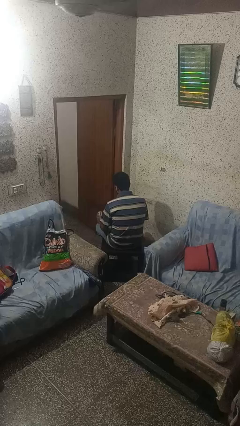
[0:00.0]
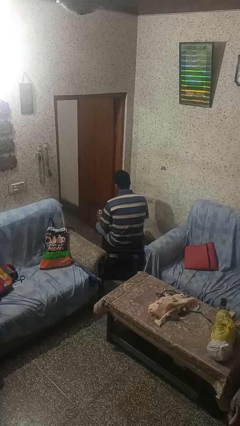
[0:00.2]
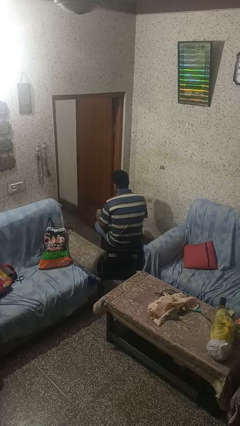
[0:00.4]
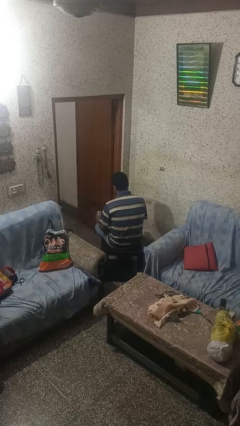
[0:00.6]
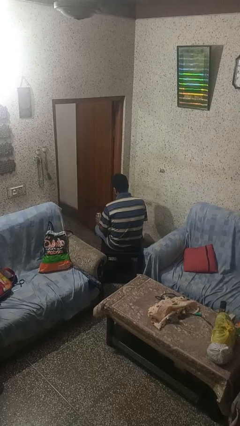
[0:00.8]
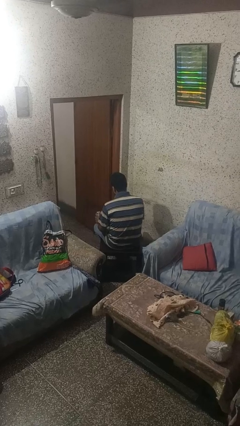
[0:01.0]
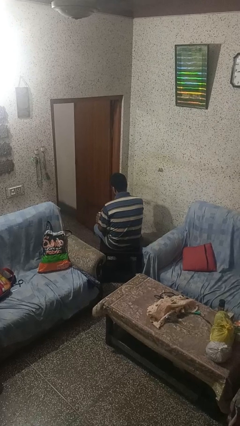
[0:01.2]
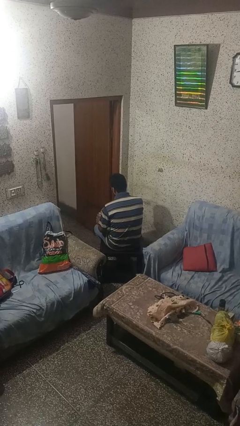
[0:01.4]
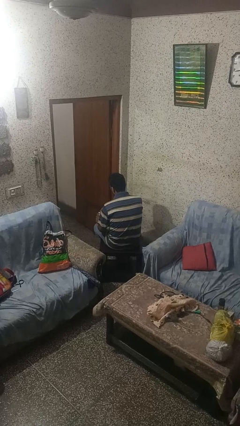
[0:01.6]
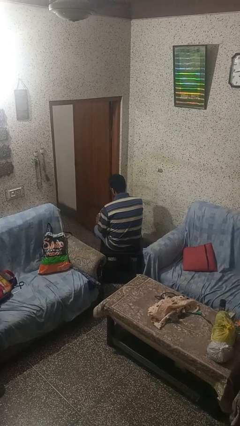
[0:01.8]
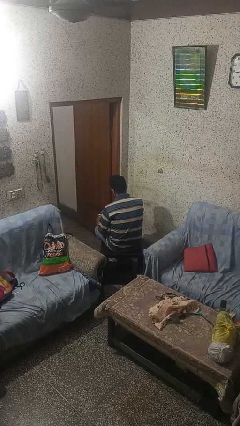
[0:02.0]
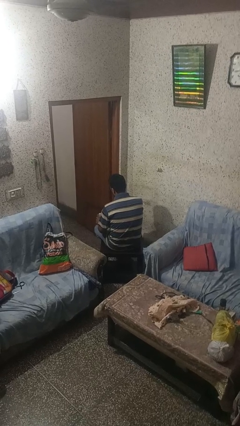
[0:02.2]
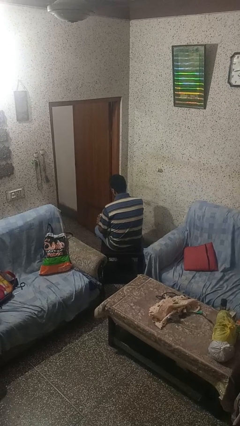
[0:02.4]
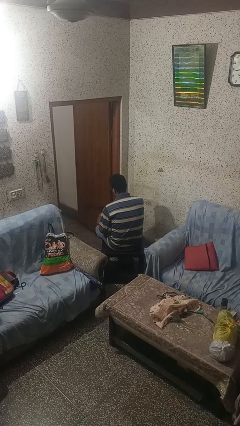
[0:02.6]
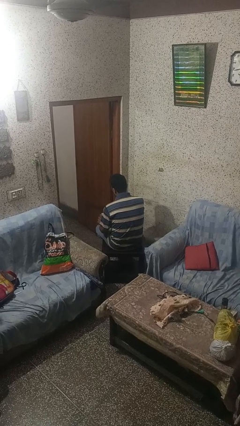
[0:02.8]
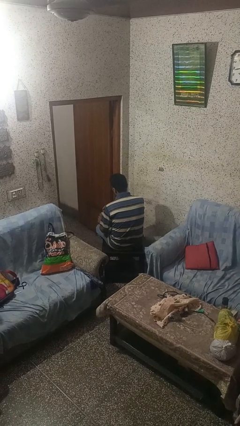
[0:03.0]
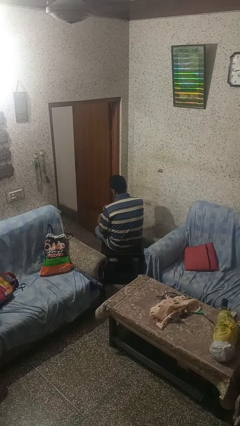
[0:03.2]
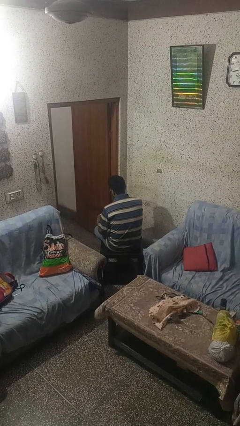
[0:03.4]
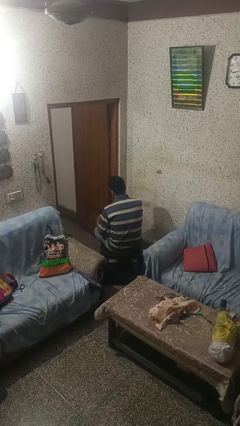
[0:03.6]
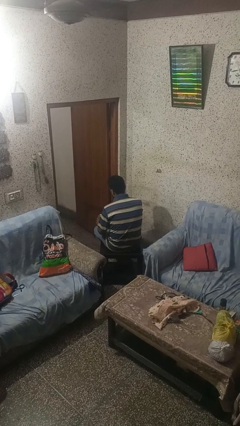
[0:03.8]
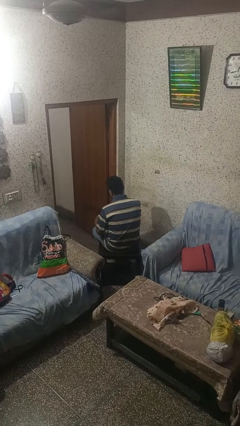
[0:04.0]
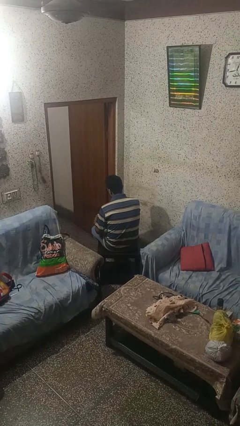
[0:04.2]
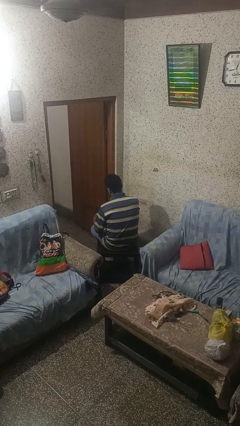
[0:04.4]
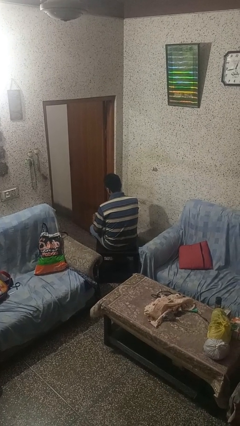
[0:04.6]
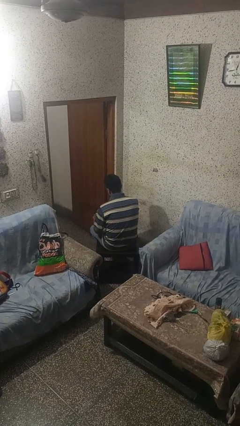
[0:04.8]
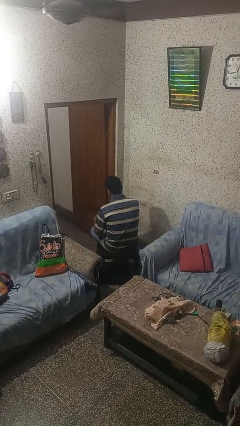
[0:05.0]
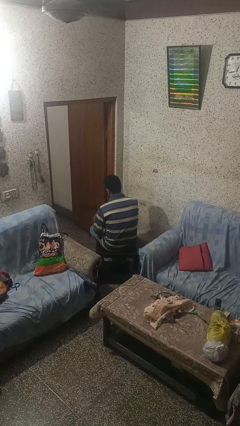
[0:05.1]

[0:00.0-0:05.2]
person opens beverage can

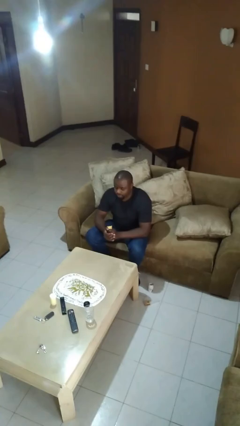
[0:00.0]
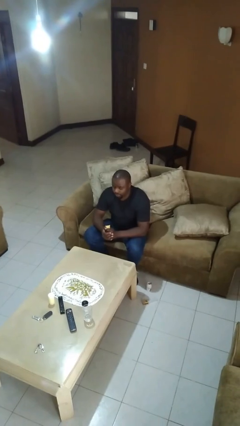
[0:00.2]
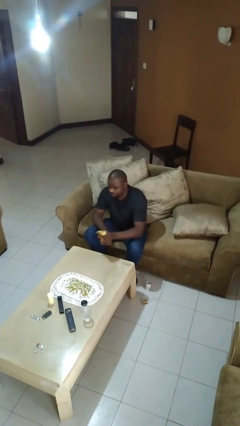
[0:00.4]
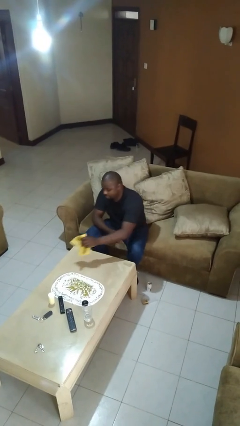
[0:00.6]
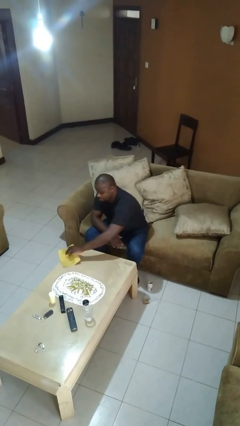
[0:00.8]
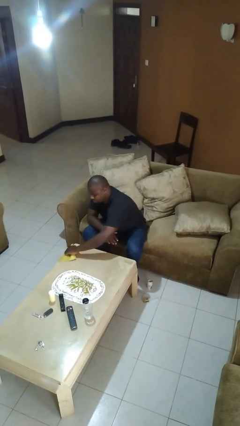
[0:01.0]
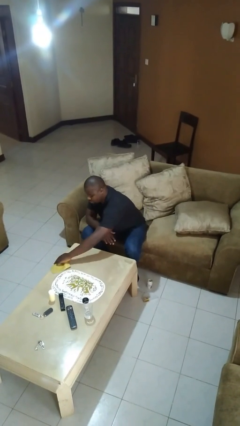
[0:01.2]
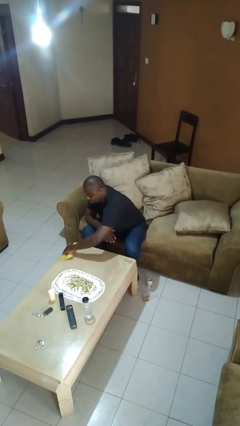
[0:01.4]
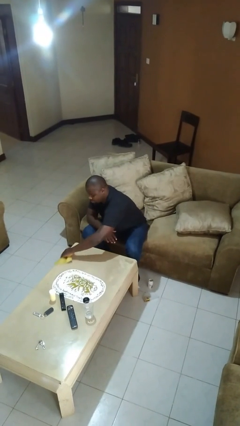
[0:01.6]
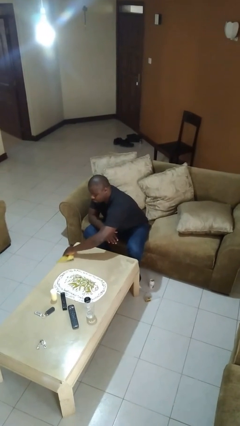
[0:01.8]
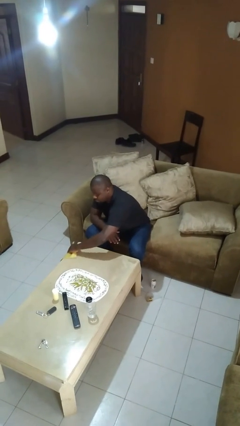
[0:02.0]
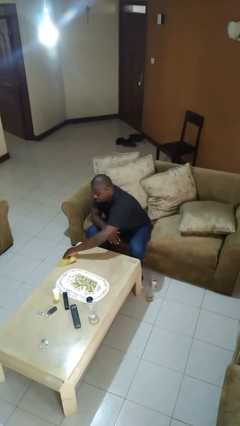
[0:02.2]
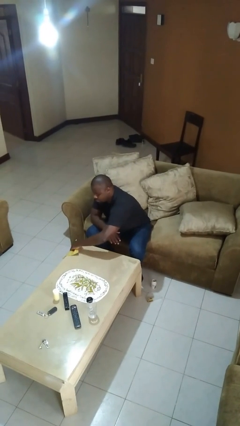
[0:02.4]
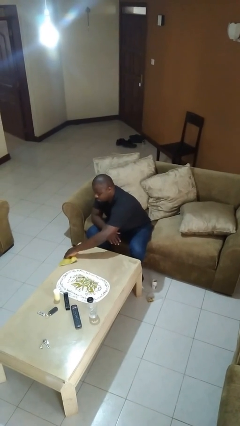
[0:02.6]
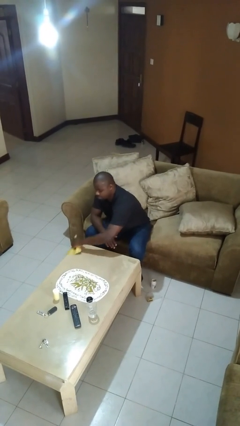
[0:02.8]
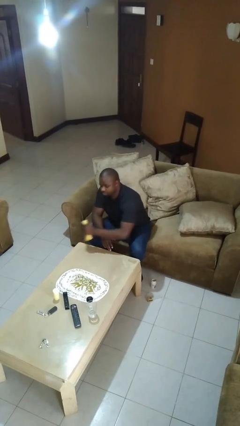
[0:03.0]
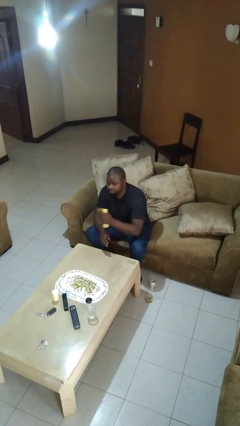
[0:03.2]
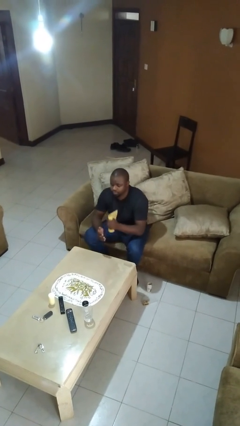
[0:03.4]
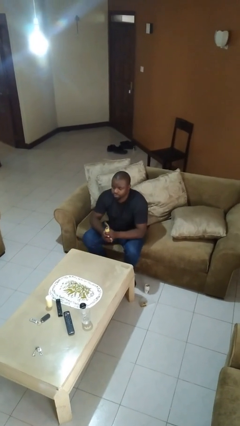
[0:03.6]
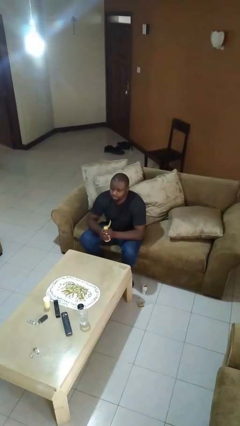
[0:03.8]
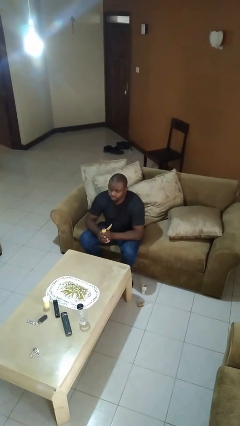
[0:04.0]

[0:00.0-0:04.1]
person cleans table with rag

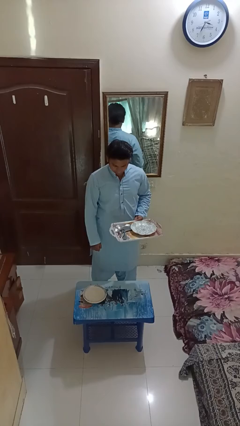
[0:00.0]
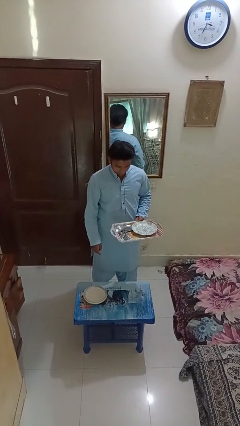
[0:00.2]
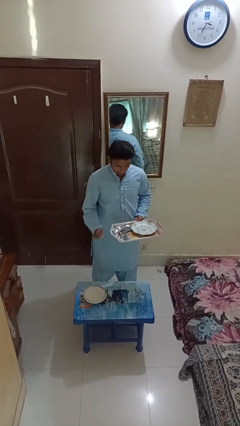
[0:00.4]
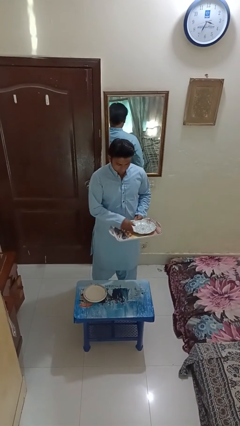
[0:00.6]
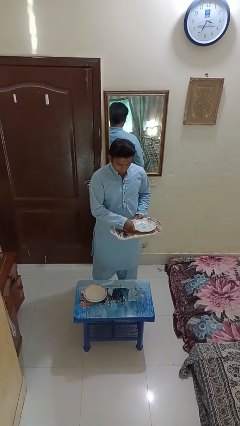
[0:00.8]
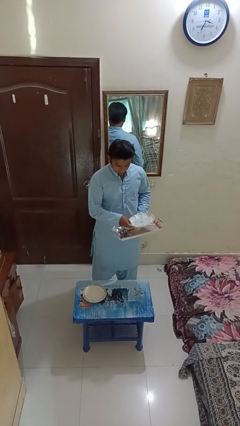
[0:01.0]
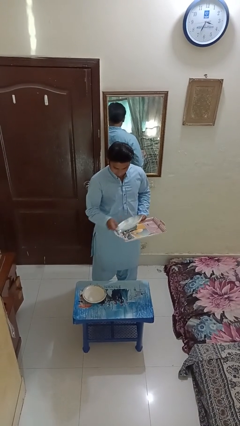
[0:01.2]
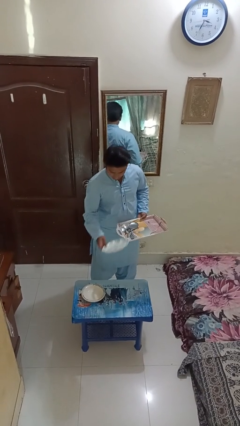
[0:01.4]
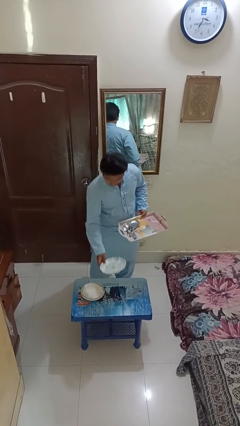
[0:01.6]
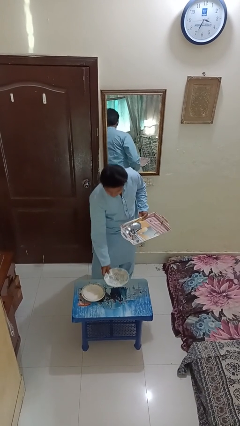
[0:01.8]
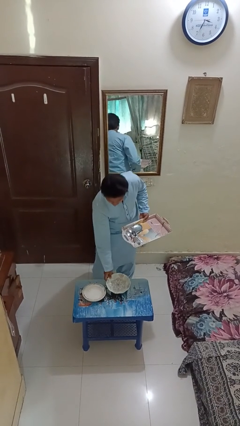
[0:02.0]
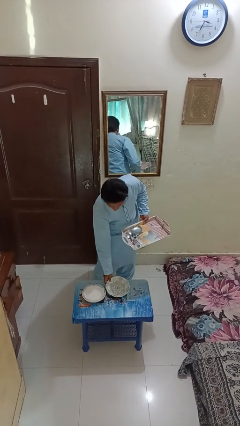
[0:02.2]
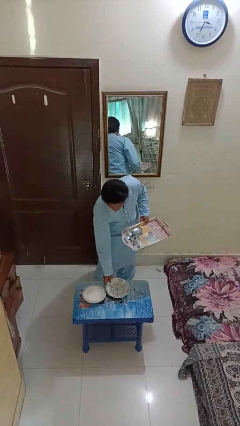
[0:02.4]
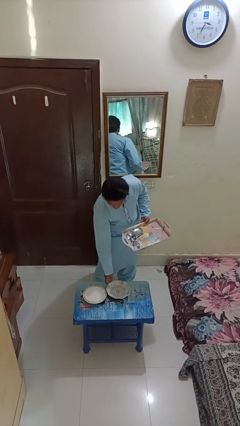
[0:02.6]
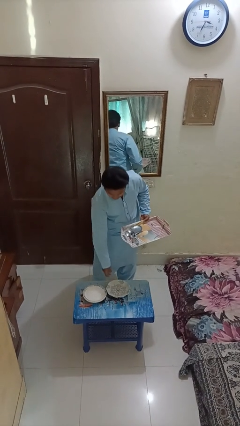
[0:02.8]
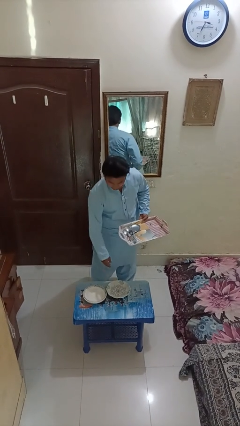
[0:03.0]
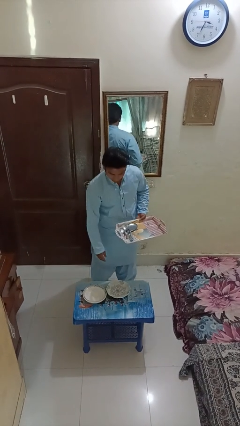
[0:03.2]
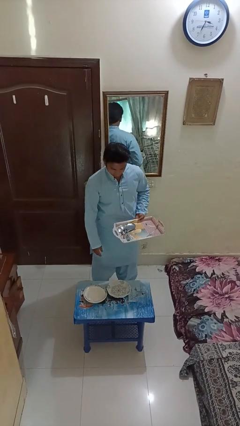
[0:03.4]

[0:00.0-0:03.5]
person sets table

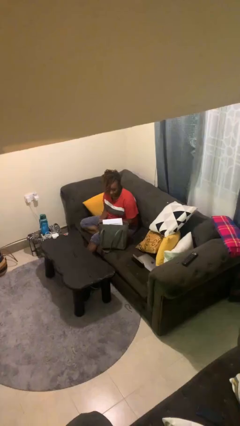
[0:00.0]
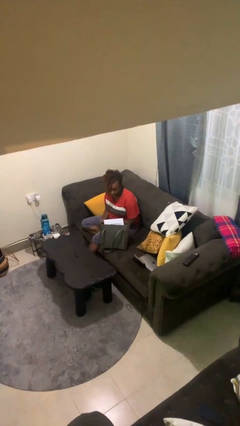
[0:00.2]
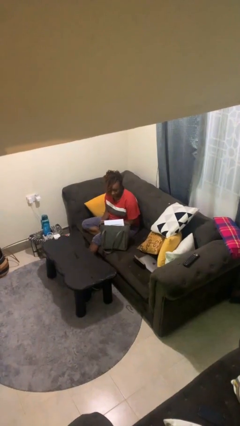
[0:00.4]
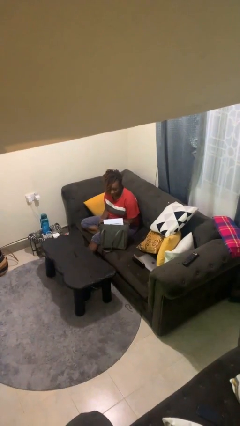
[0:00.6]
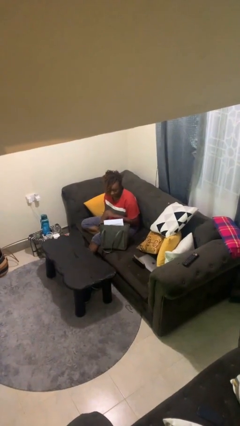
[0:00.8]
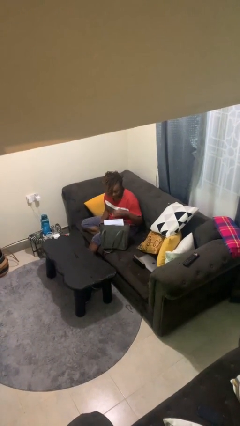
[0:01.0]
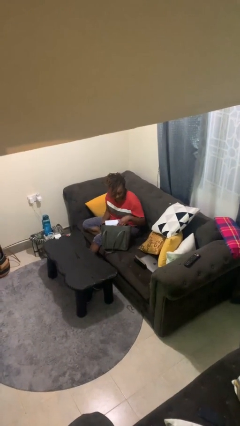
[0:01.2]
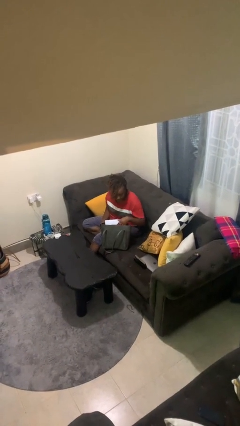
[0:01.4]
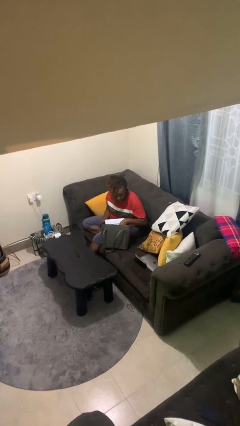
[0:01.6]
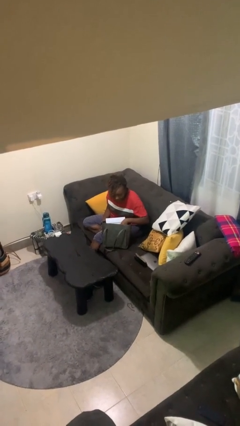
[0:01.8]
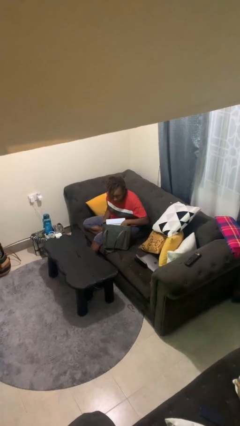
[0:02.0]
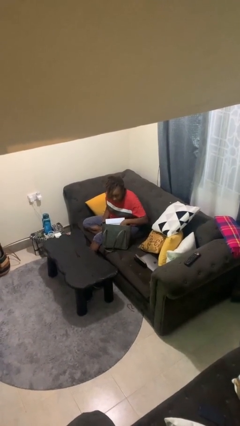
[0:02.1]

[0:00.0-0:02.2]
person searches in purse

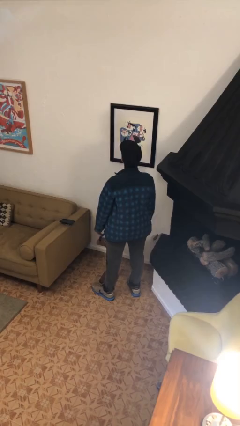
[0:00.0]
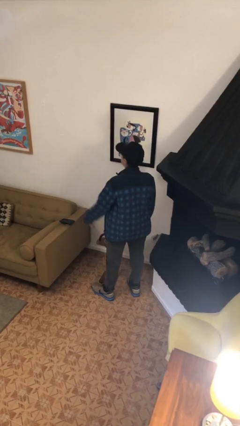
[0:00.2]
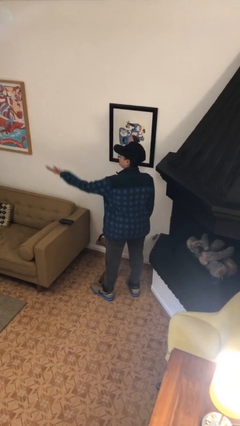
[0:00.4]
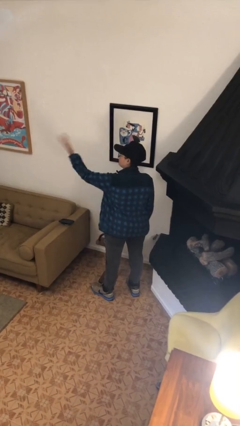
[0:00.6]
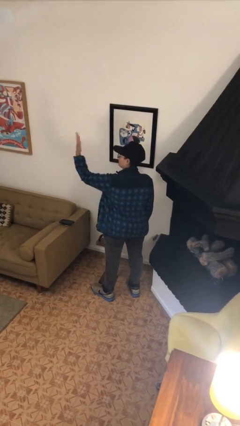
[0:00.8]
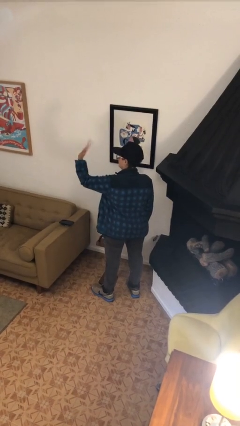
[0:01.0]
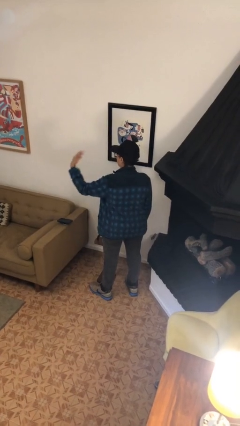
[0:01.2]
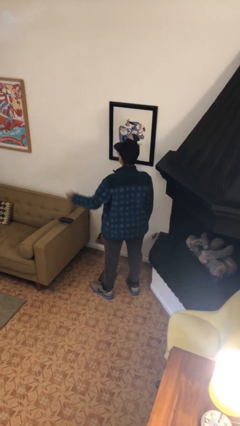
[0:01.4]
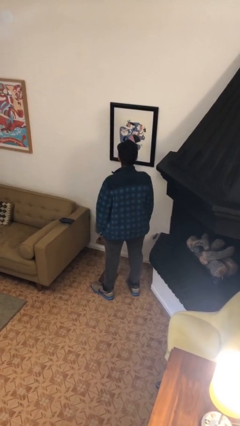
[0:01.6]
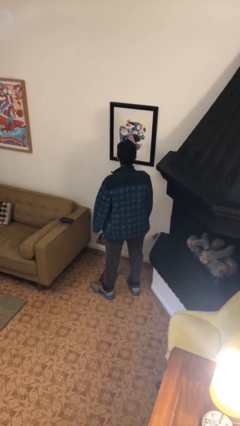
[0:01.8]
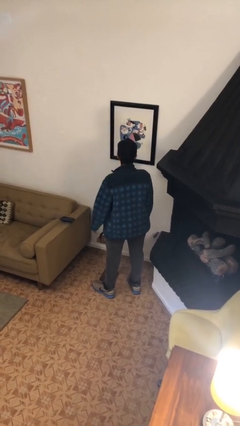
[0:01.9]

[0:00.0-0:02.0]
person gestures come here

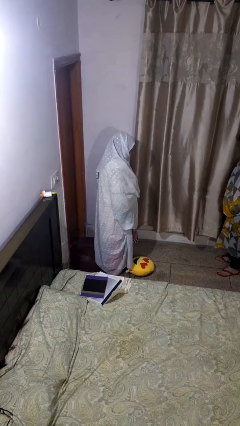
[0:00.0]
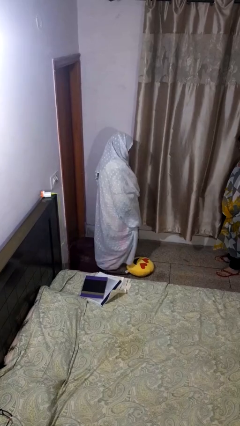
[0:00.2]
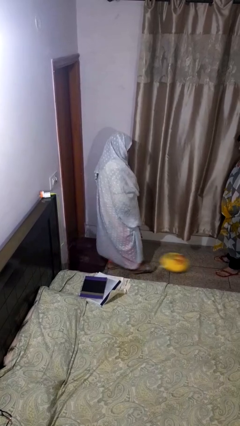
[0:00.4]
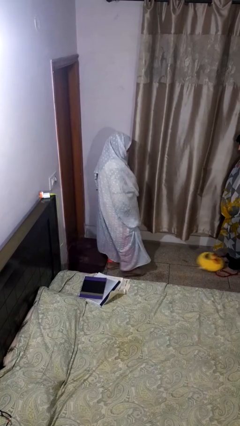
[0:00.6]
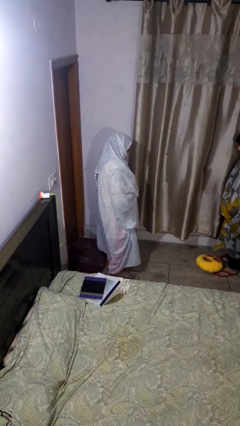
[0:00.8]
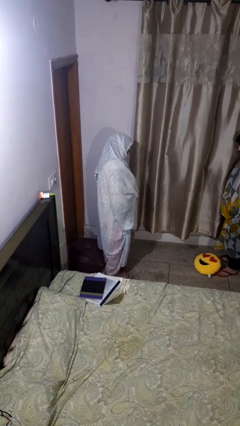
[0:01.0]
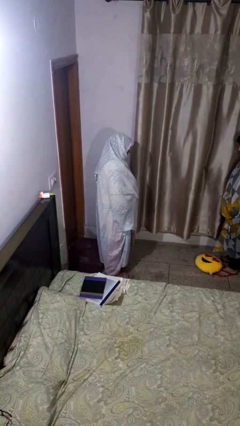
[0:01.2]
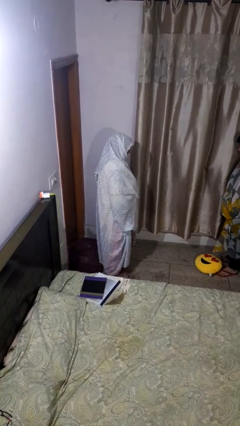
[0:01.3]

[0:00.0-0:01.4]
person kicks object to person
